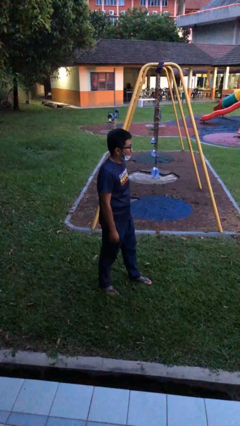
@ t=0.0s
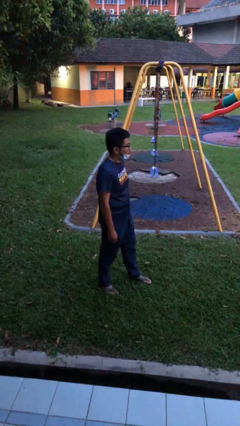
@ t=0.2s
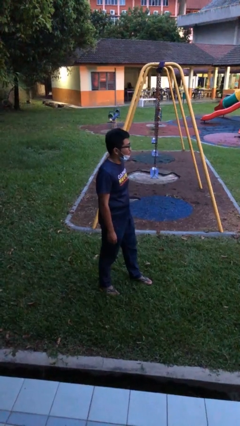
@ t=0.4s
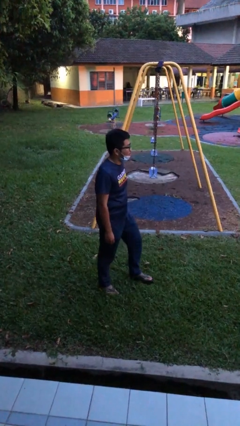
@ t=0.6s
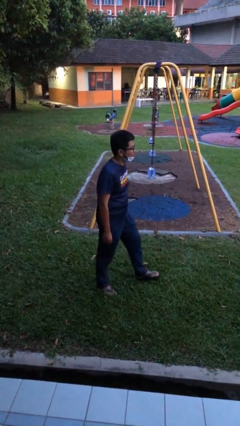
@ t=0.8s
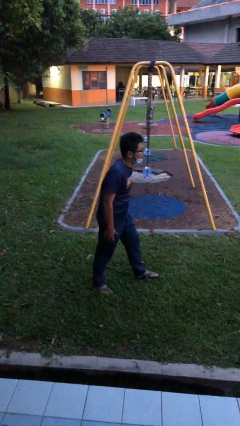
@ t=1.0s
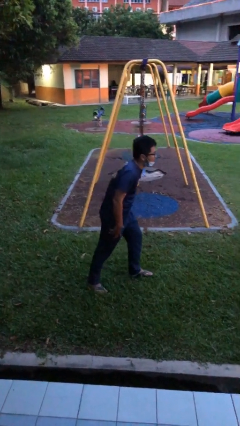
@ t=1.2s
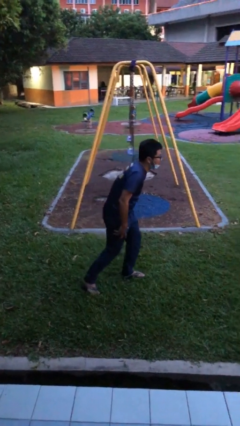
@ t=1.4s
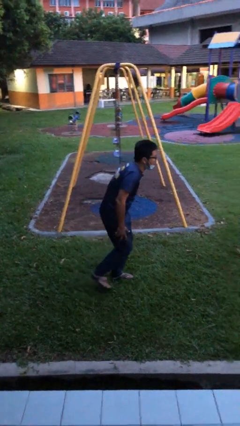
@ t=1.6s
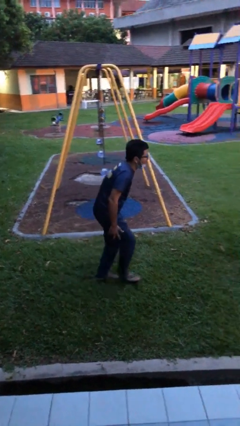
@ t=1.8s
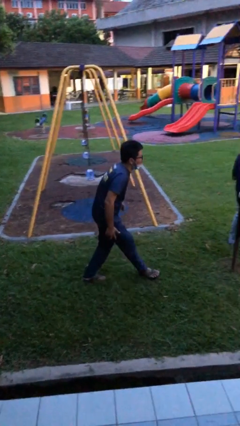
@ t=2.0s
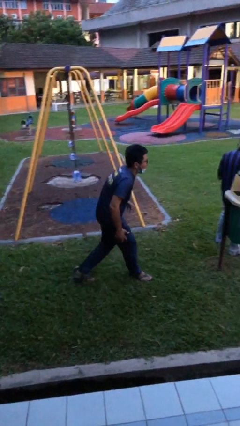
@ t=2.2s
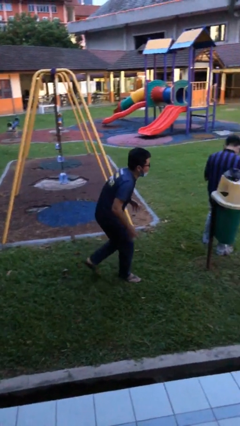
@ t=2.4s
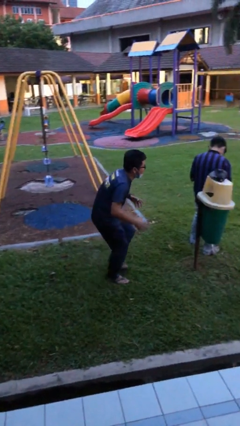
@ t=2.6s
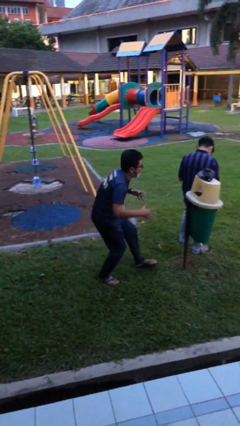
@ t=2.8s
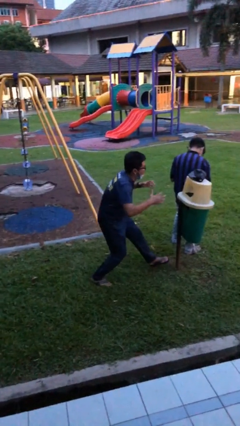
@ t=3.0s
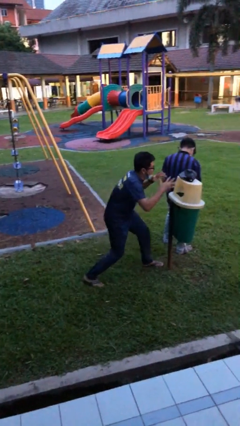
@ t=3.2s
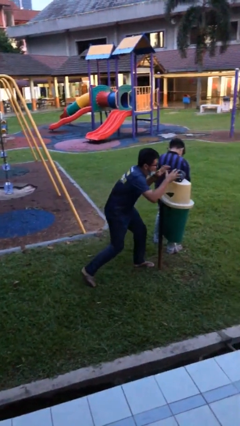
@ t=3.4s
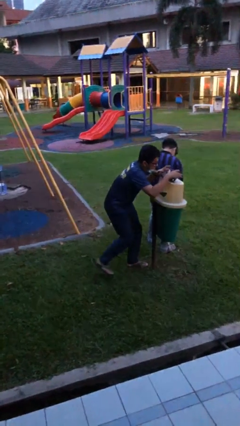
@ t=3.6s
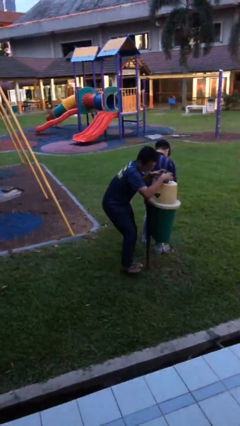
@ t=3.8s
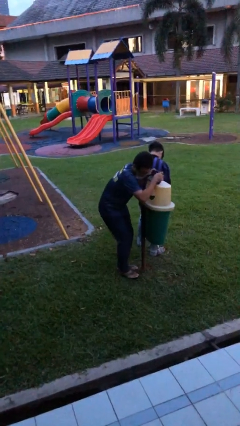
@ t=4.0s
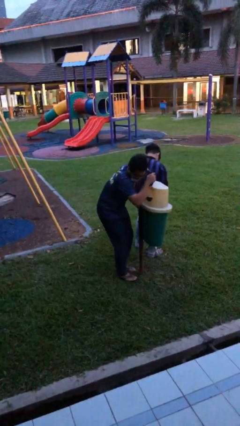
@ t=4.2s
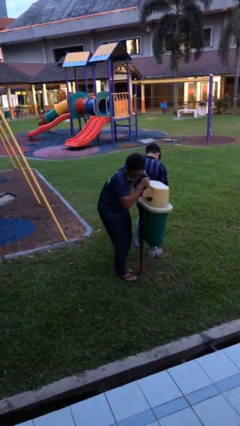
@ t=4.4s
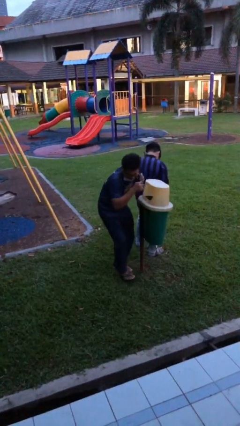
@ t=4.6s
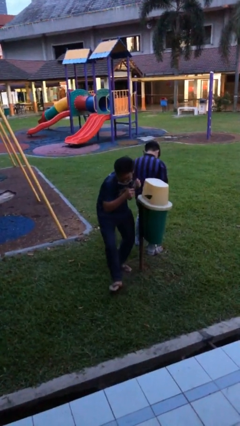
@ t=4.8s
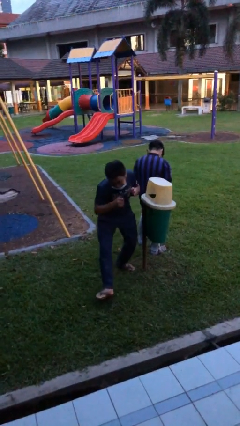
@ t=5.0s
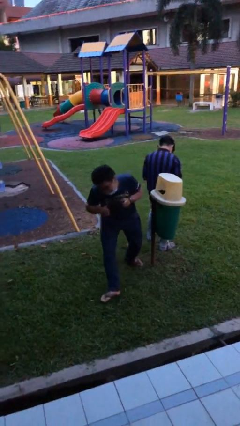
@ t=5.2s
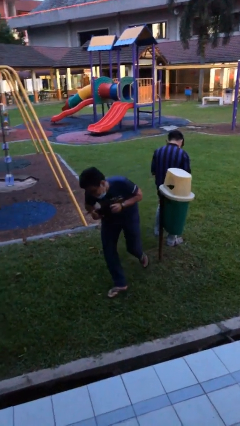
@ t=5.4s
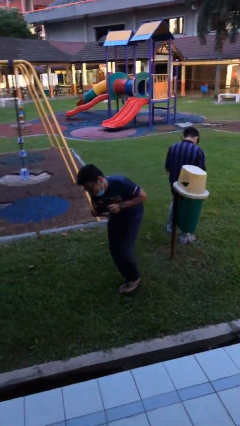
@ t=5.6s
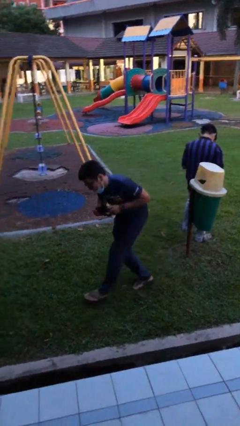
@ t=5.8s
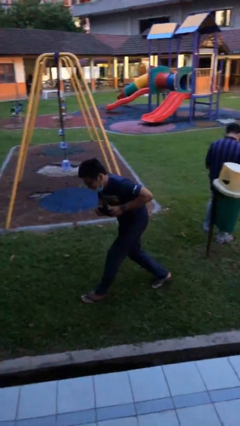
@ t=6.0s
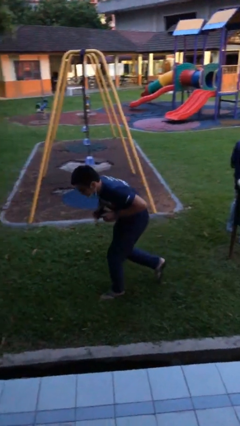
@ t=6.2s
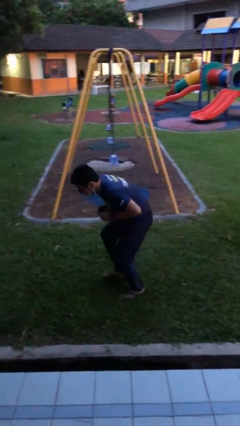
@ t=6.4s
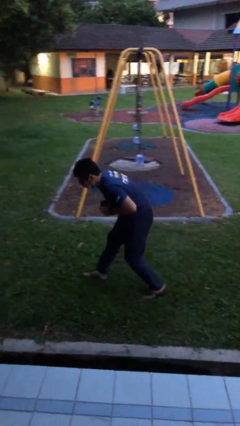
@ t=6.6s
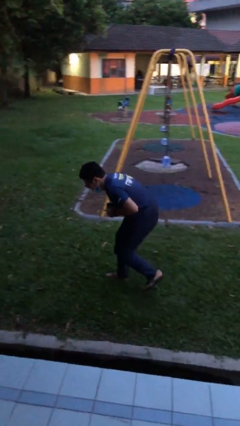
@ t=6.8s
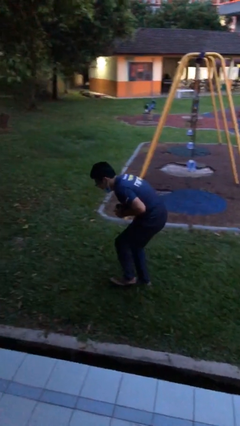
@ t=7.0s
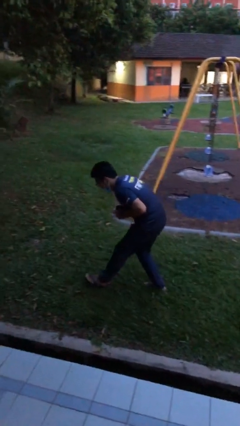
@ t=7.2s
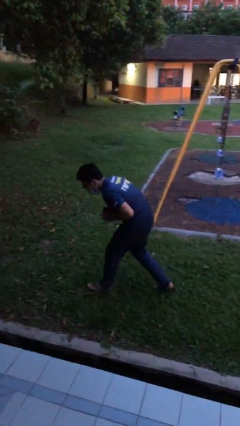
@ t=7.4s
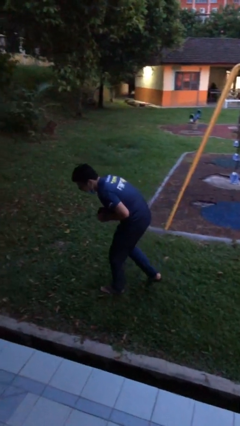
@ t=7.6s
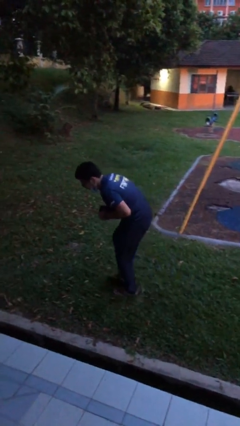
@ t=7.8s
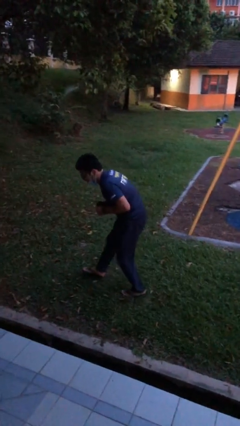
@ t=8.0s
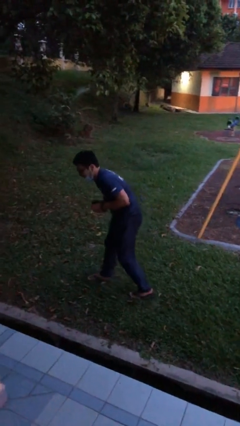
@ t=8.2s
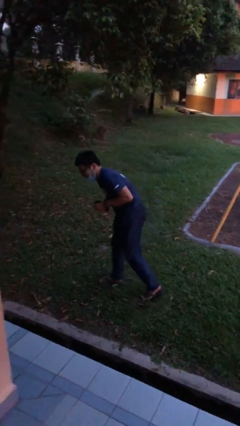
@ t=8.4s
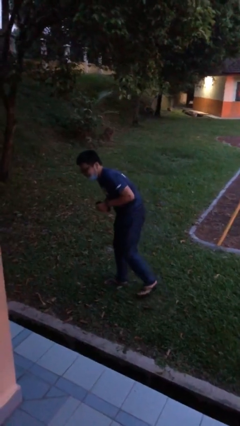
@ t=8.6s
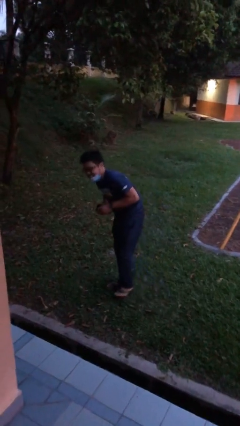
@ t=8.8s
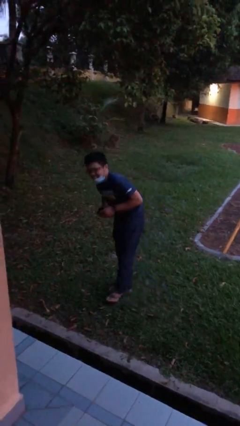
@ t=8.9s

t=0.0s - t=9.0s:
person steals object from person

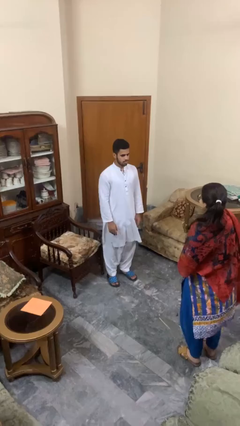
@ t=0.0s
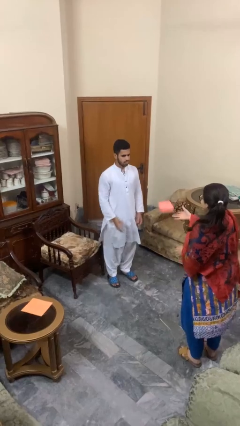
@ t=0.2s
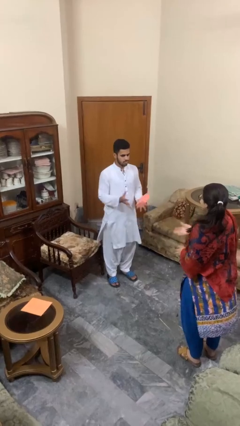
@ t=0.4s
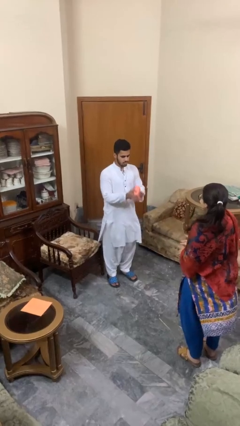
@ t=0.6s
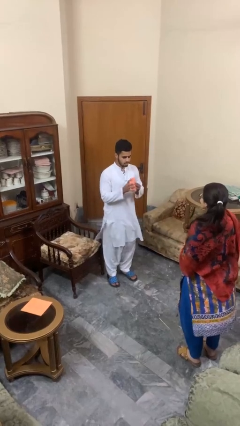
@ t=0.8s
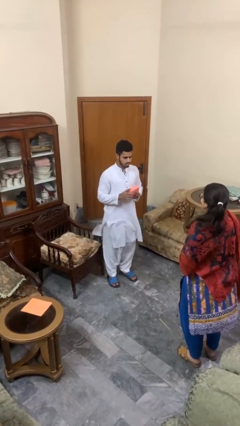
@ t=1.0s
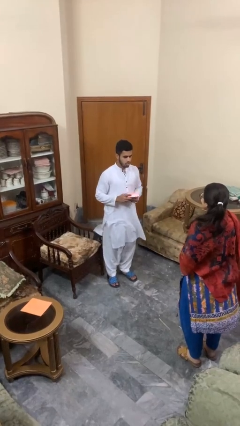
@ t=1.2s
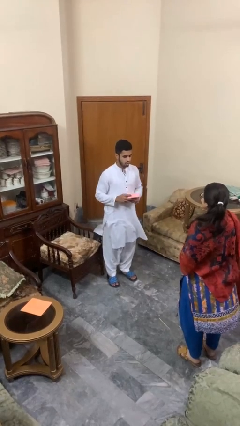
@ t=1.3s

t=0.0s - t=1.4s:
person catches object from person

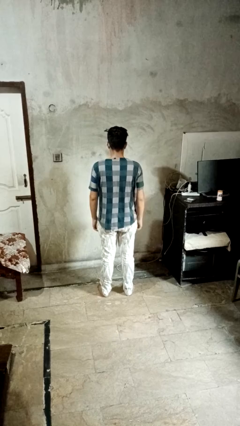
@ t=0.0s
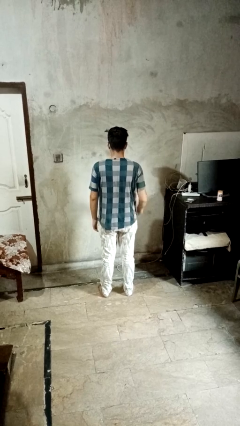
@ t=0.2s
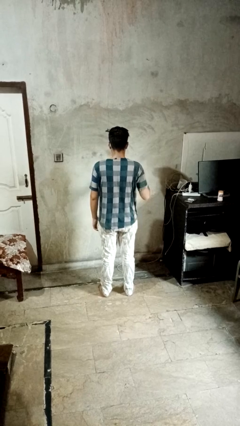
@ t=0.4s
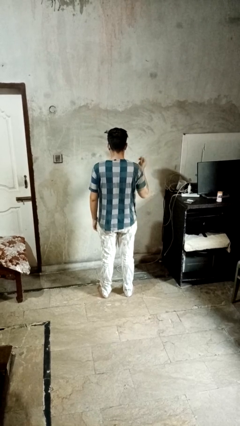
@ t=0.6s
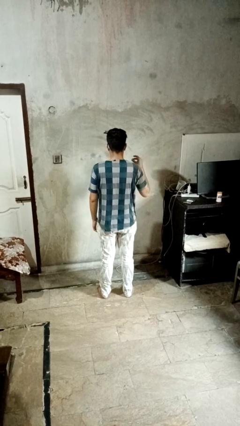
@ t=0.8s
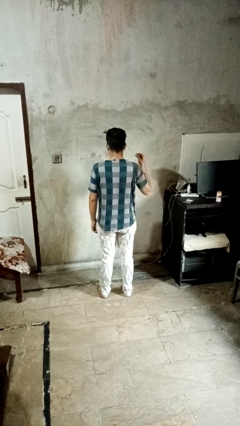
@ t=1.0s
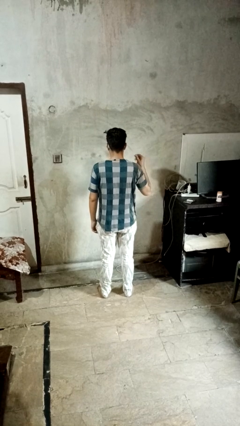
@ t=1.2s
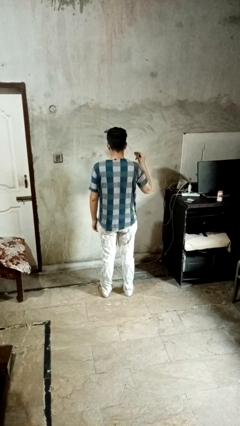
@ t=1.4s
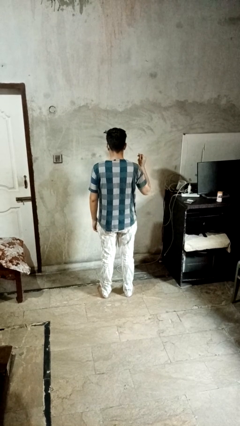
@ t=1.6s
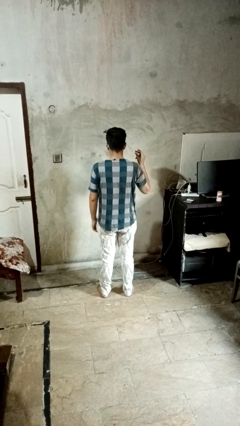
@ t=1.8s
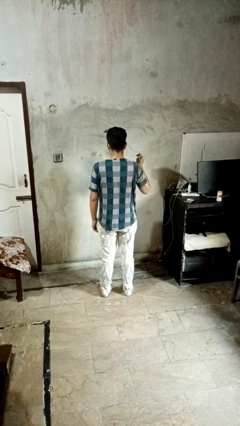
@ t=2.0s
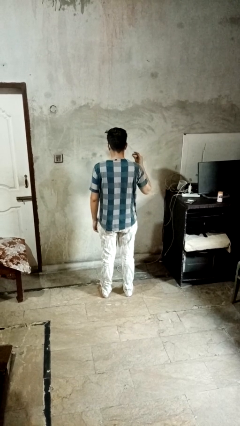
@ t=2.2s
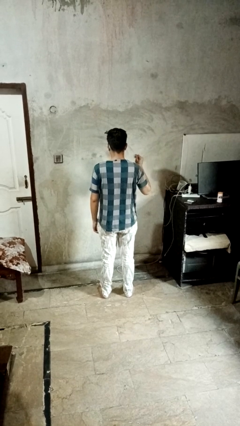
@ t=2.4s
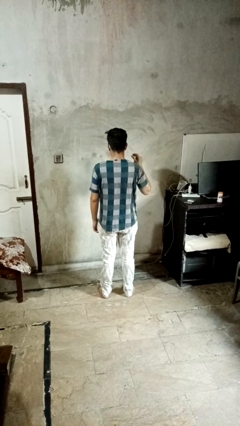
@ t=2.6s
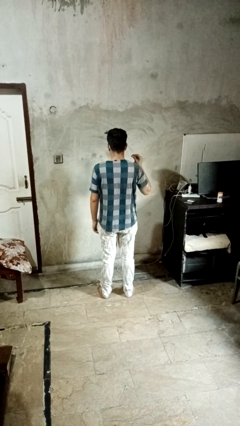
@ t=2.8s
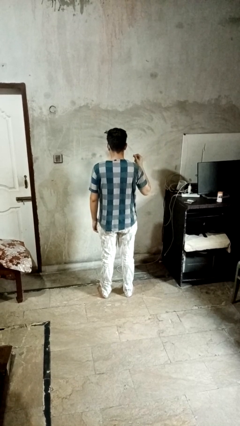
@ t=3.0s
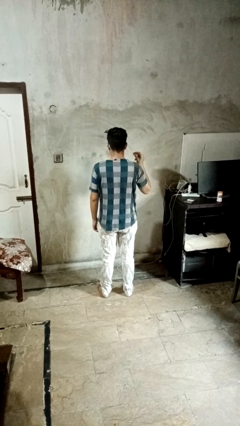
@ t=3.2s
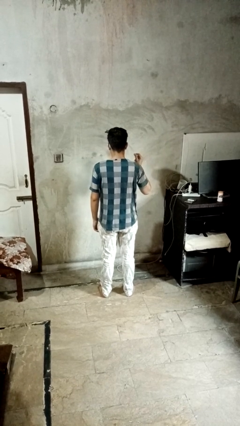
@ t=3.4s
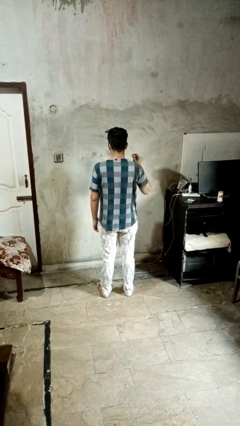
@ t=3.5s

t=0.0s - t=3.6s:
person snaps fingers

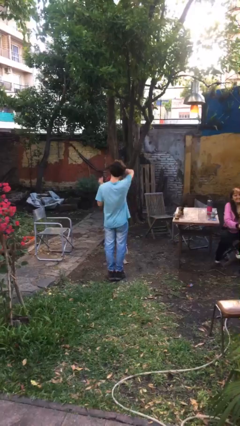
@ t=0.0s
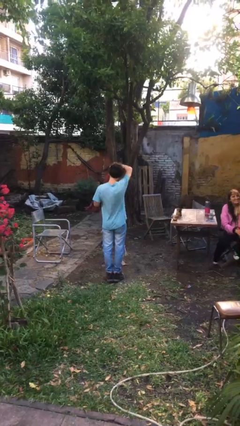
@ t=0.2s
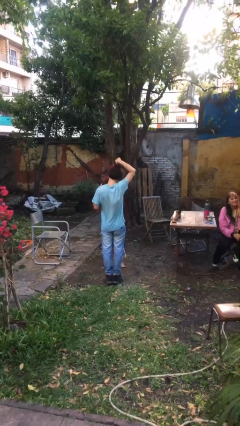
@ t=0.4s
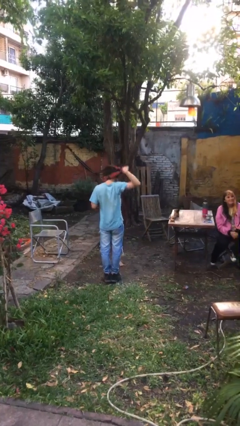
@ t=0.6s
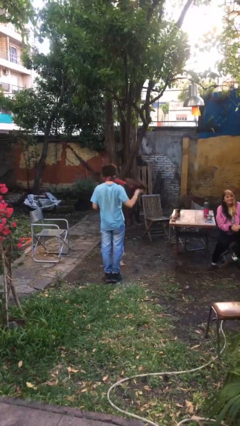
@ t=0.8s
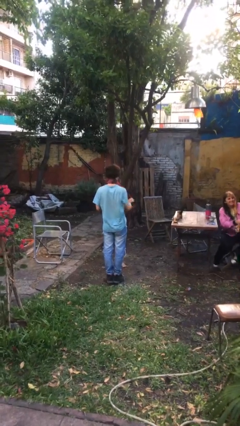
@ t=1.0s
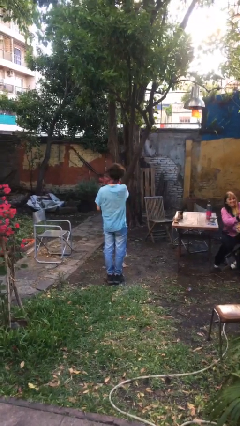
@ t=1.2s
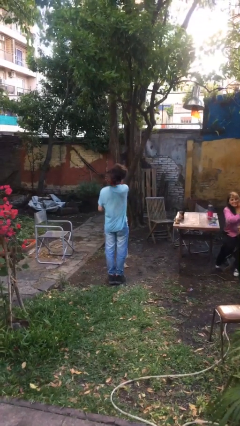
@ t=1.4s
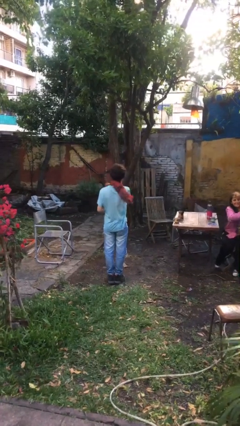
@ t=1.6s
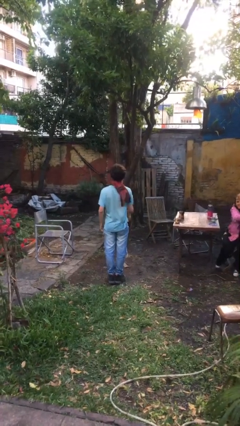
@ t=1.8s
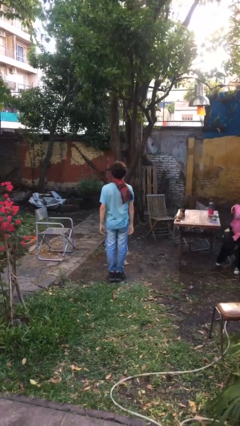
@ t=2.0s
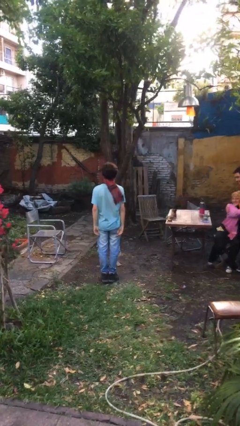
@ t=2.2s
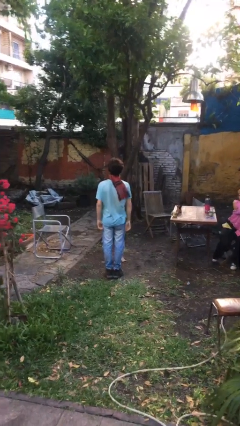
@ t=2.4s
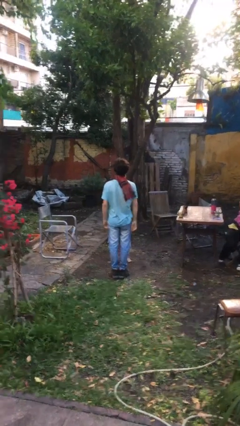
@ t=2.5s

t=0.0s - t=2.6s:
person puts on scarf

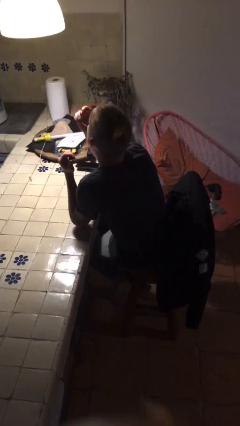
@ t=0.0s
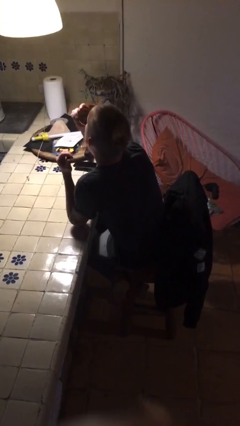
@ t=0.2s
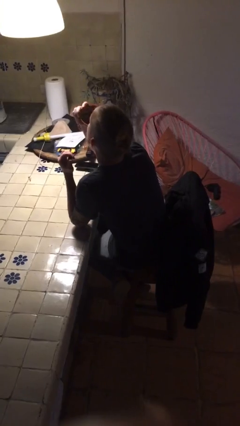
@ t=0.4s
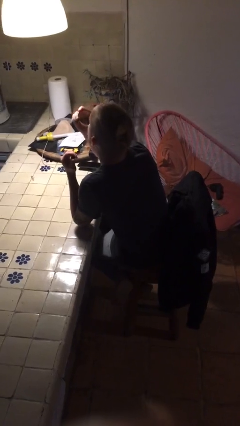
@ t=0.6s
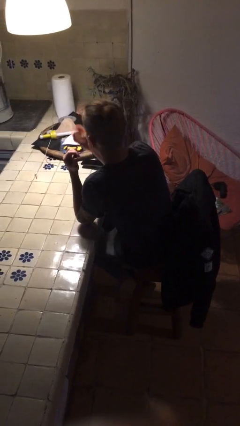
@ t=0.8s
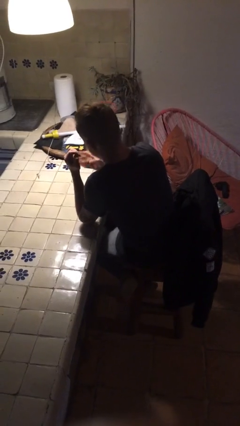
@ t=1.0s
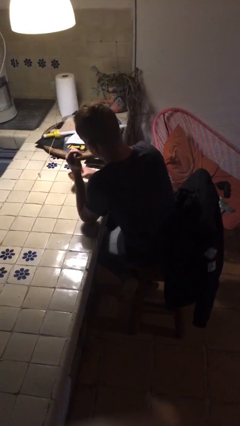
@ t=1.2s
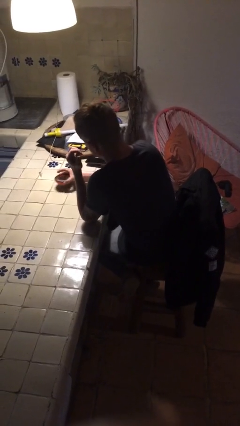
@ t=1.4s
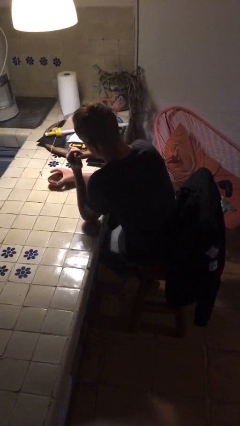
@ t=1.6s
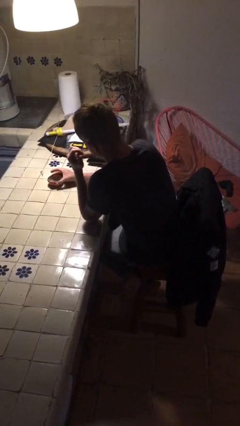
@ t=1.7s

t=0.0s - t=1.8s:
person puts down object on table
